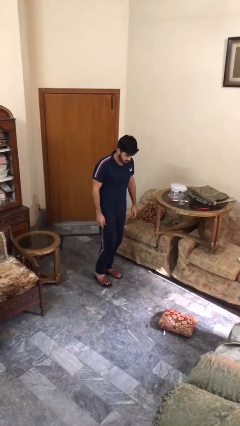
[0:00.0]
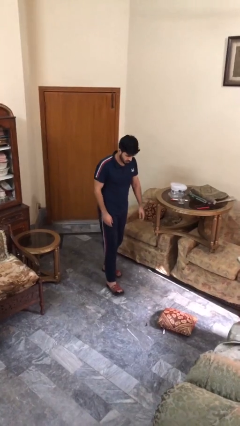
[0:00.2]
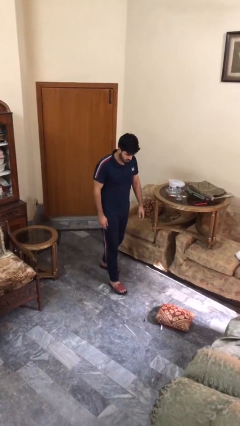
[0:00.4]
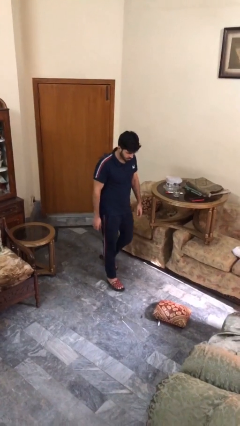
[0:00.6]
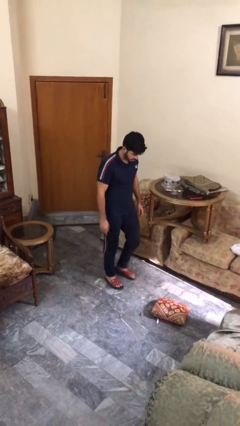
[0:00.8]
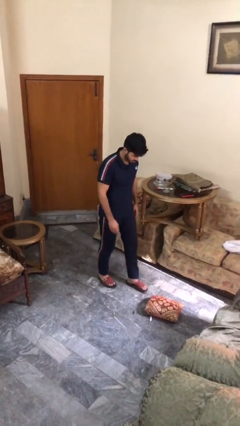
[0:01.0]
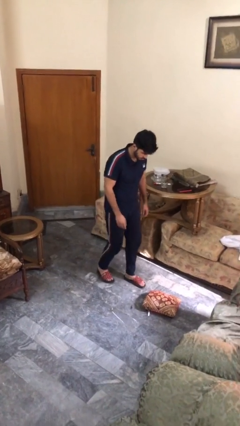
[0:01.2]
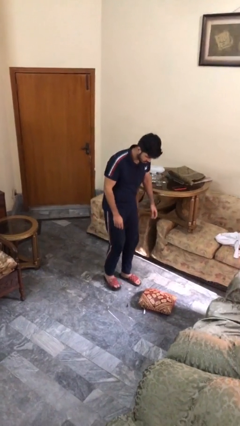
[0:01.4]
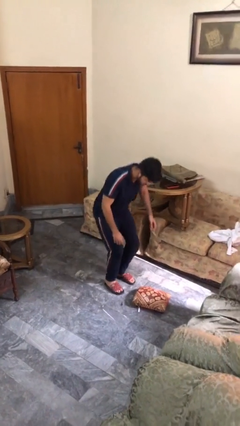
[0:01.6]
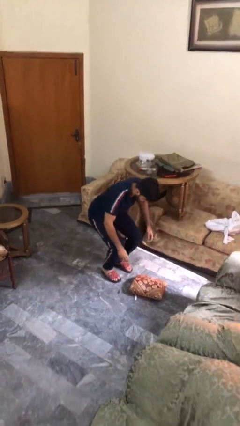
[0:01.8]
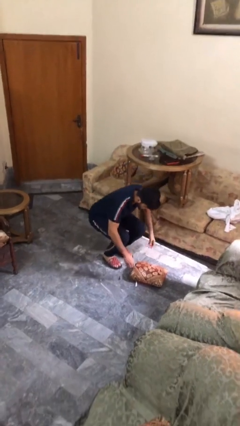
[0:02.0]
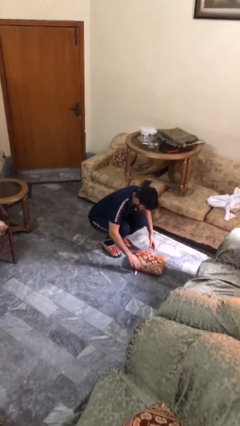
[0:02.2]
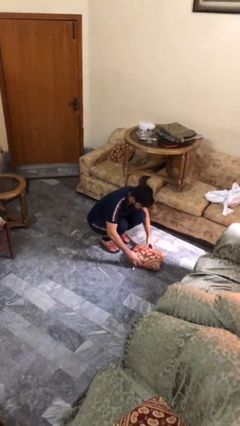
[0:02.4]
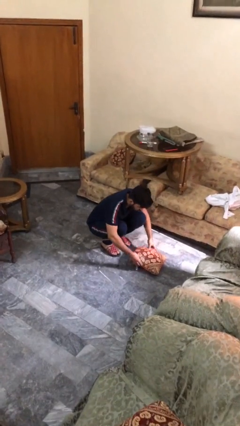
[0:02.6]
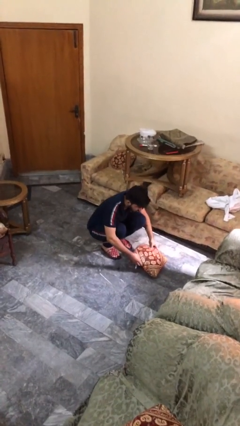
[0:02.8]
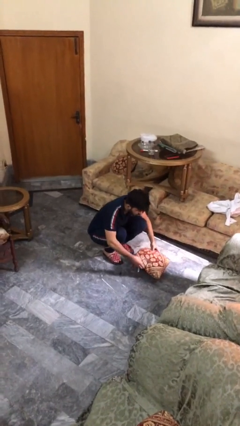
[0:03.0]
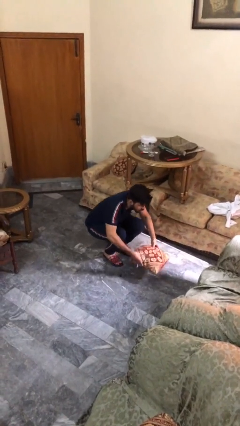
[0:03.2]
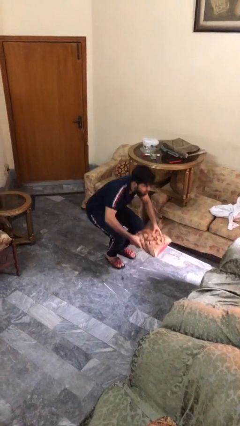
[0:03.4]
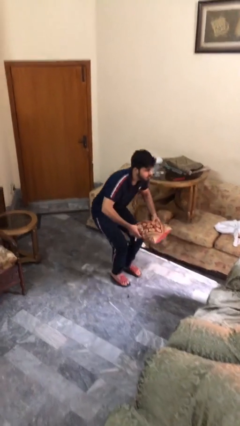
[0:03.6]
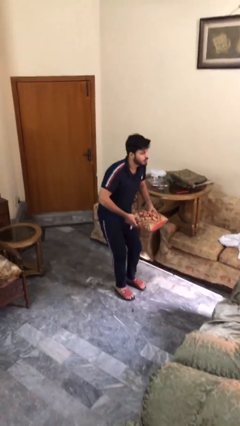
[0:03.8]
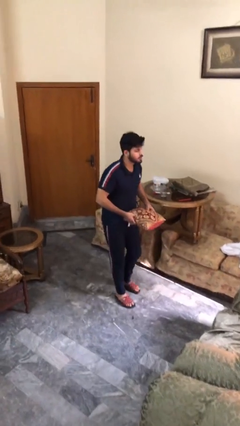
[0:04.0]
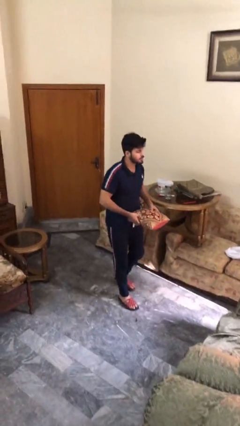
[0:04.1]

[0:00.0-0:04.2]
person picks up object from floor

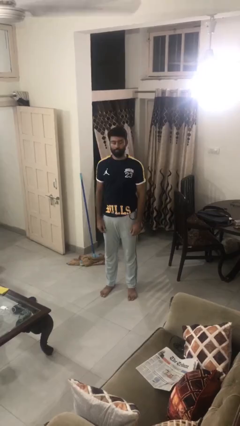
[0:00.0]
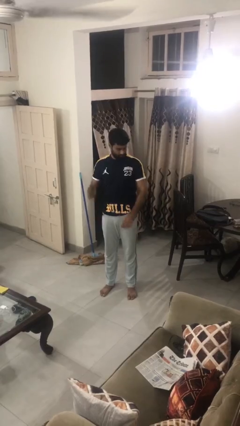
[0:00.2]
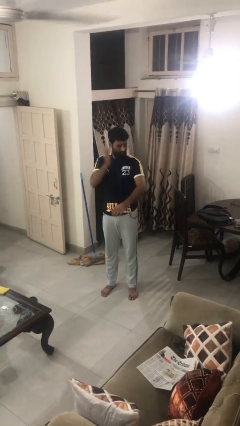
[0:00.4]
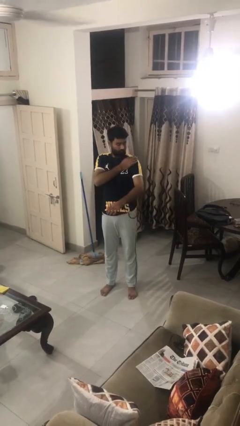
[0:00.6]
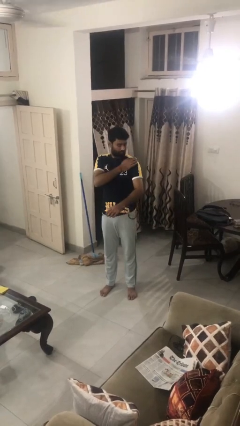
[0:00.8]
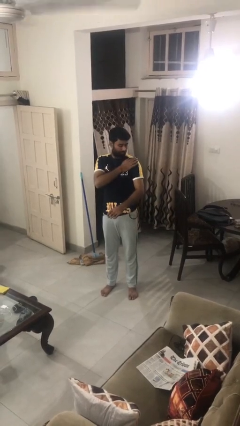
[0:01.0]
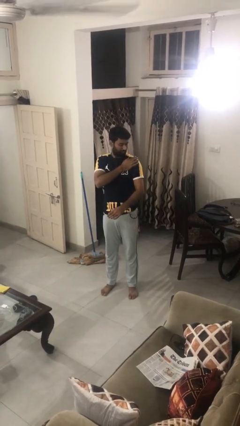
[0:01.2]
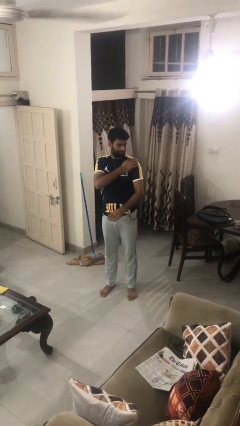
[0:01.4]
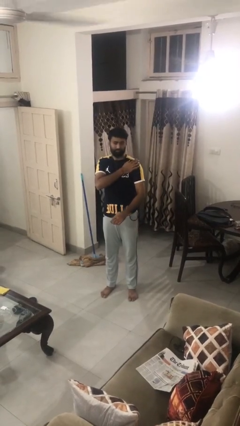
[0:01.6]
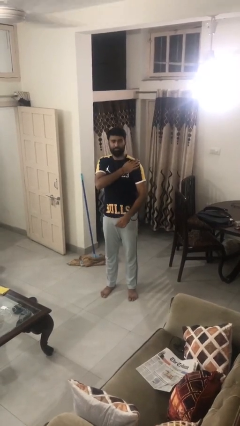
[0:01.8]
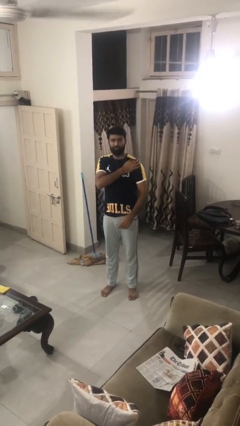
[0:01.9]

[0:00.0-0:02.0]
person swats bug

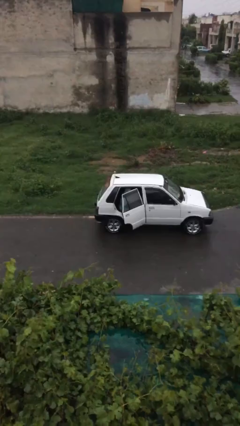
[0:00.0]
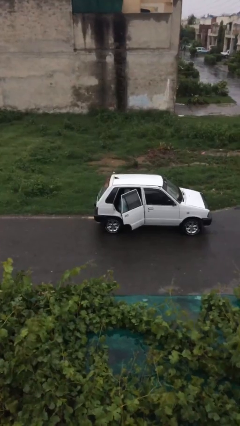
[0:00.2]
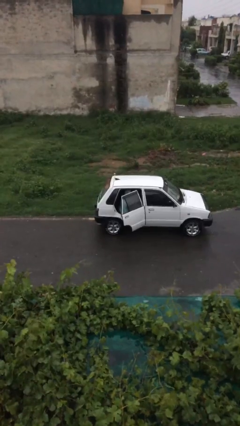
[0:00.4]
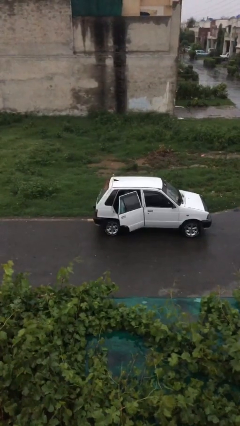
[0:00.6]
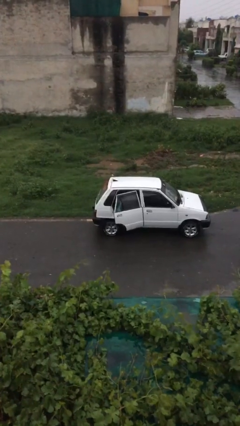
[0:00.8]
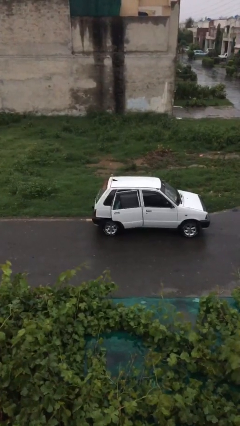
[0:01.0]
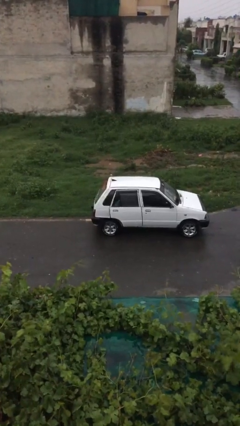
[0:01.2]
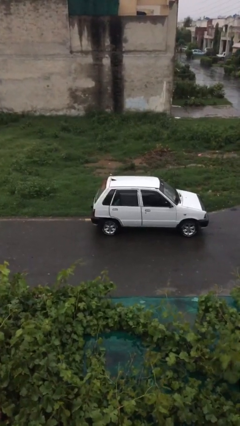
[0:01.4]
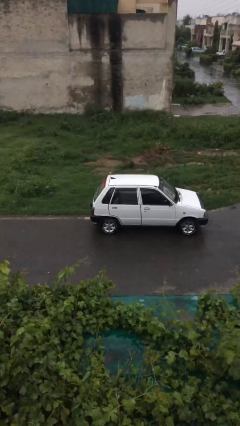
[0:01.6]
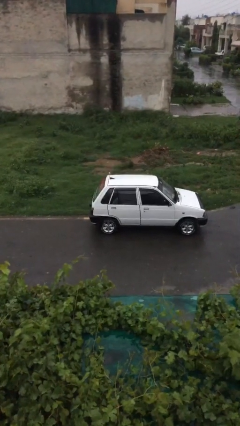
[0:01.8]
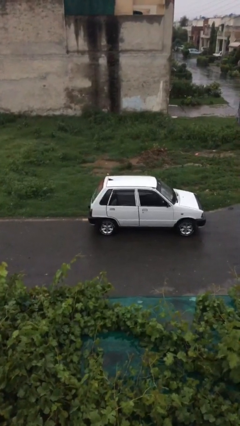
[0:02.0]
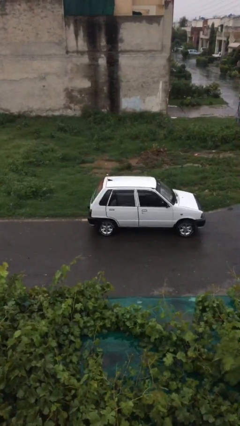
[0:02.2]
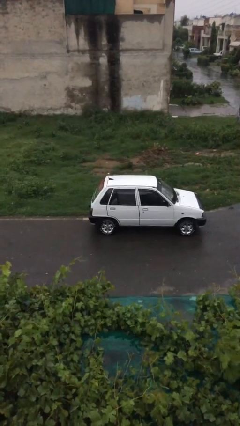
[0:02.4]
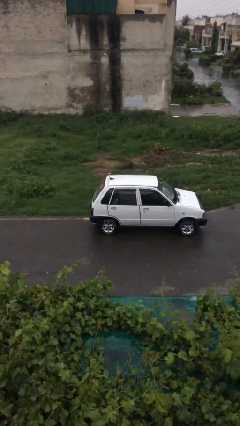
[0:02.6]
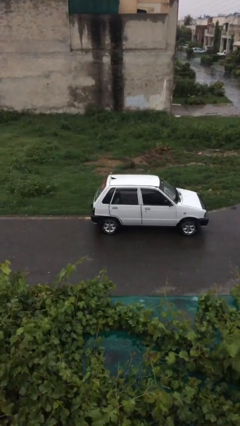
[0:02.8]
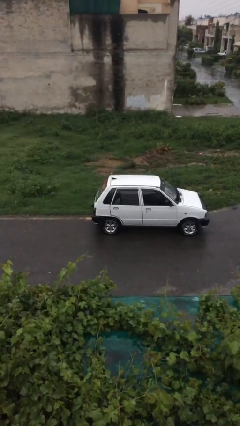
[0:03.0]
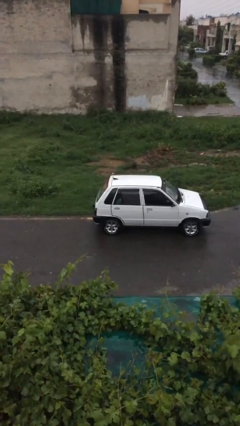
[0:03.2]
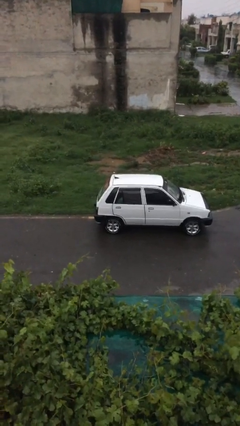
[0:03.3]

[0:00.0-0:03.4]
person closes car door

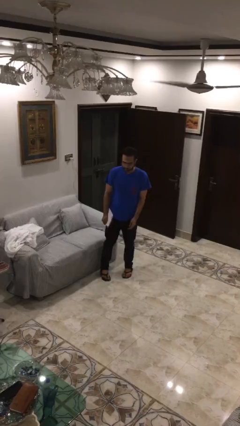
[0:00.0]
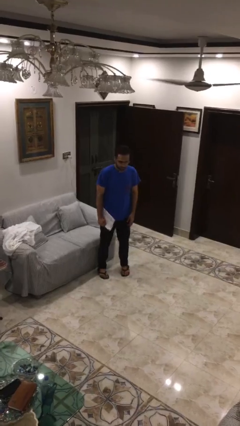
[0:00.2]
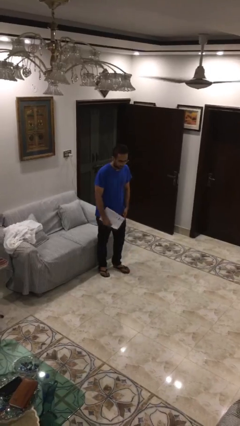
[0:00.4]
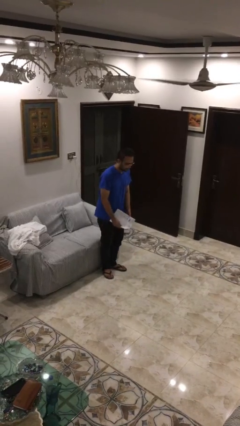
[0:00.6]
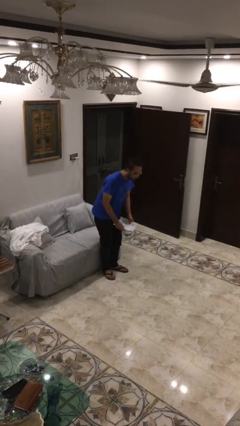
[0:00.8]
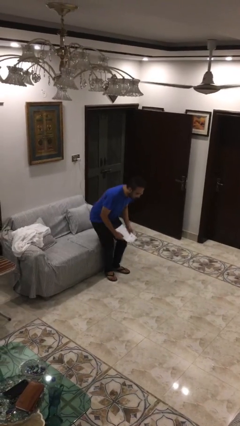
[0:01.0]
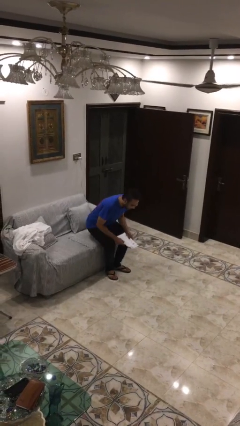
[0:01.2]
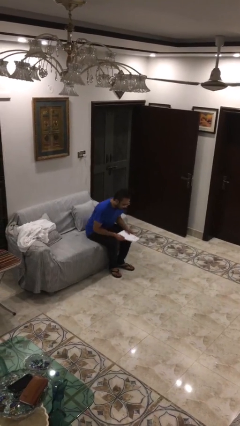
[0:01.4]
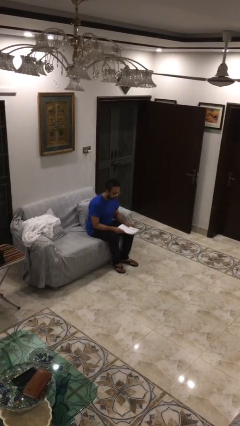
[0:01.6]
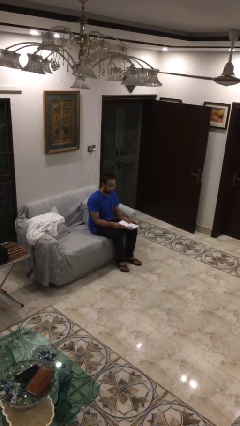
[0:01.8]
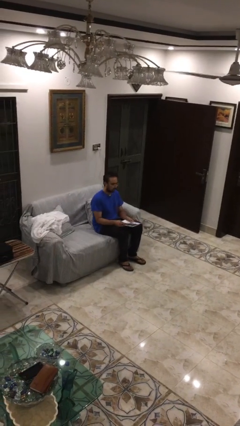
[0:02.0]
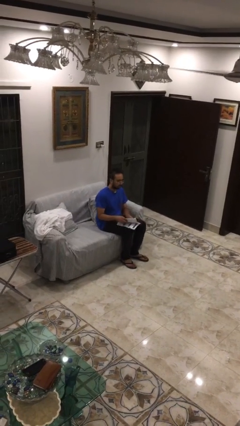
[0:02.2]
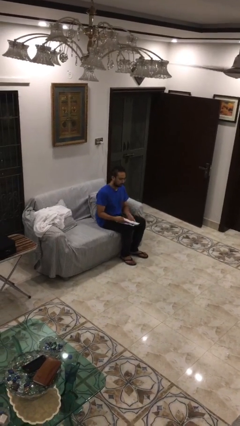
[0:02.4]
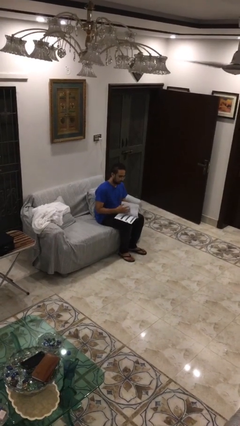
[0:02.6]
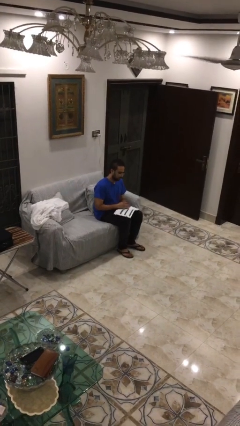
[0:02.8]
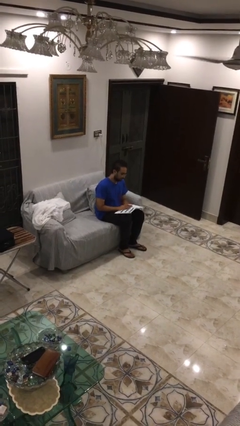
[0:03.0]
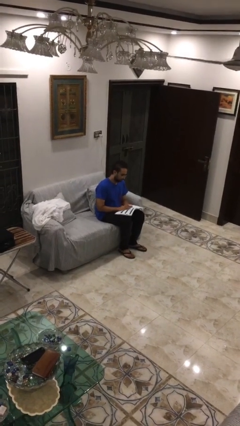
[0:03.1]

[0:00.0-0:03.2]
person sits down

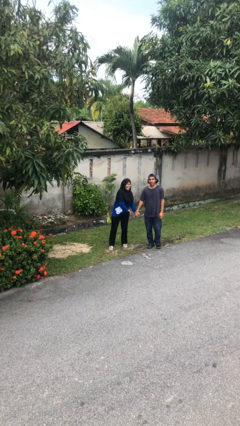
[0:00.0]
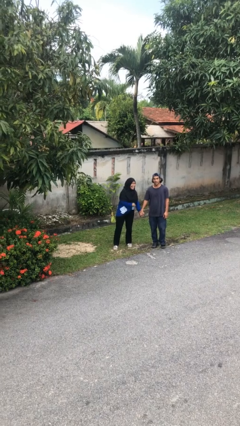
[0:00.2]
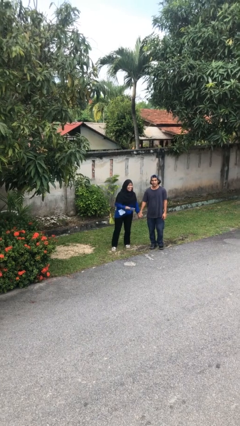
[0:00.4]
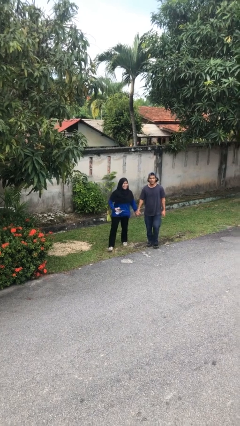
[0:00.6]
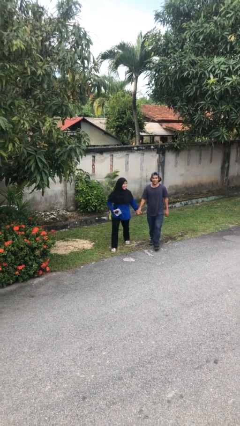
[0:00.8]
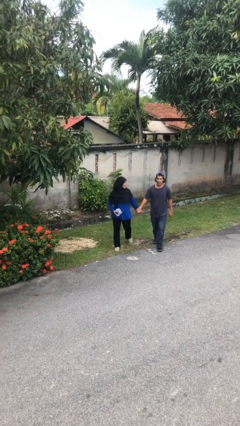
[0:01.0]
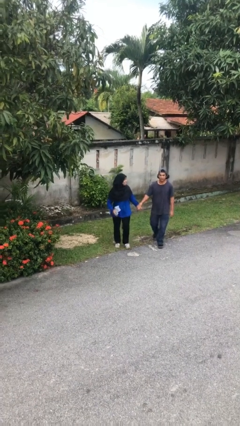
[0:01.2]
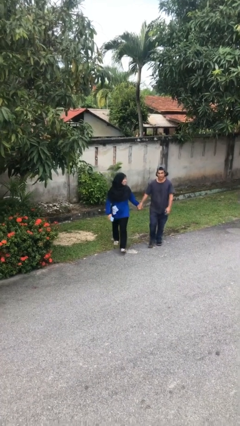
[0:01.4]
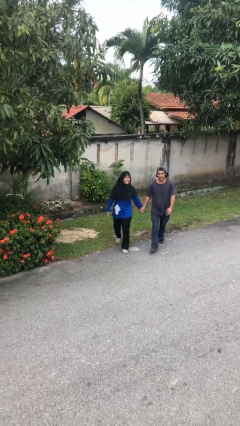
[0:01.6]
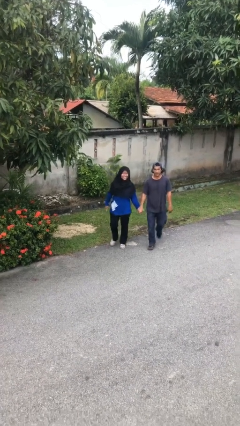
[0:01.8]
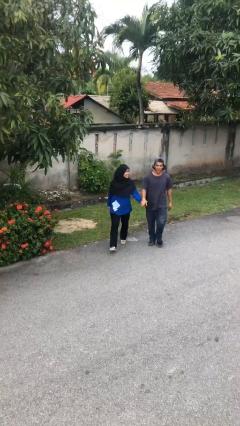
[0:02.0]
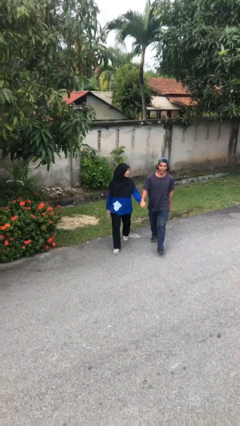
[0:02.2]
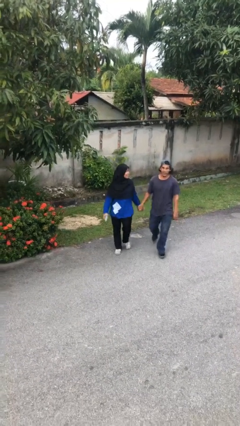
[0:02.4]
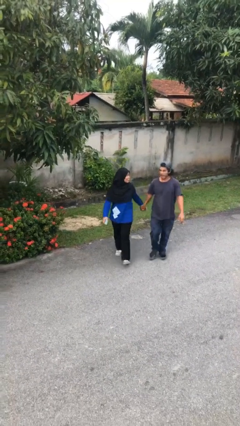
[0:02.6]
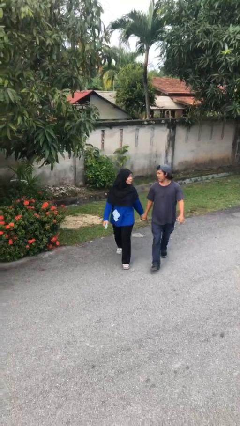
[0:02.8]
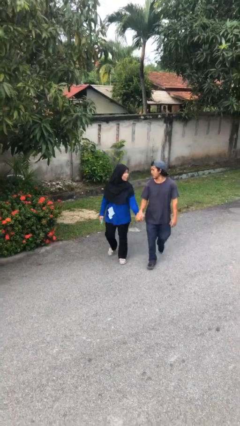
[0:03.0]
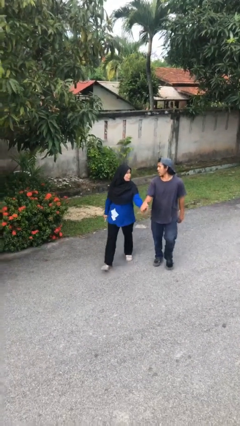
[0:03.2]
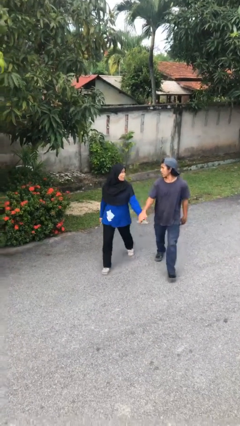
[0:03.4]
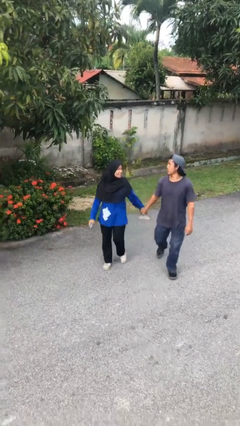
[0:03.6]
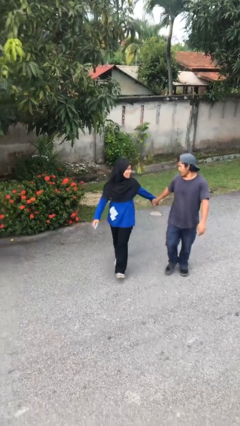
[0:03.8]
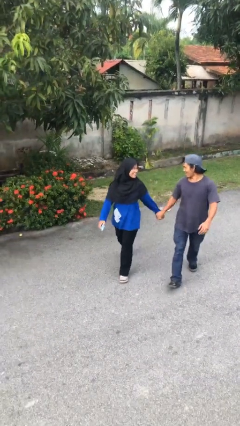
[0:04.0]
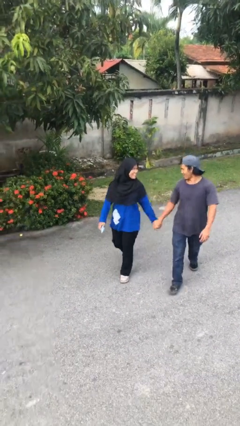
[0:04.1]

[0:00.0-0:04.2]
person holds hand

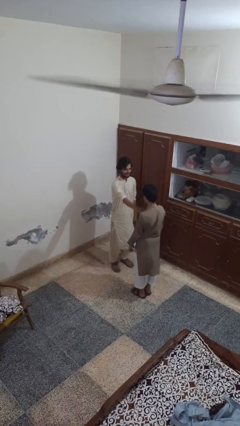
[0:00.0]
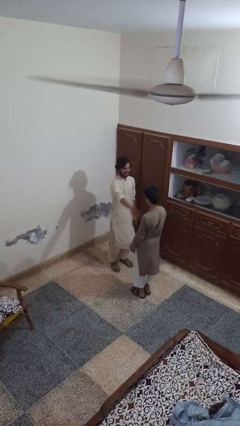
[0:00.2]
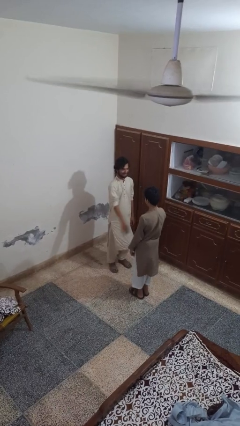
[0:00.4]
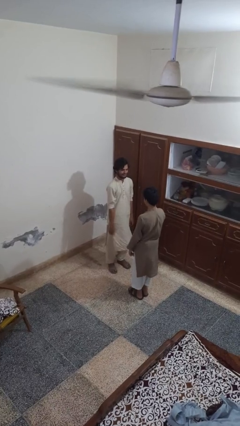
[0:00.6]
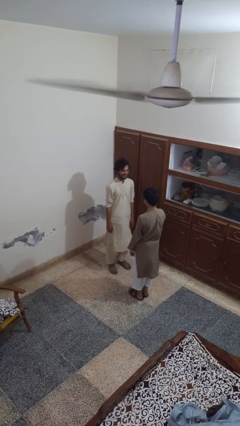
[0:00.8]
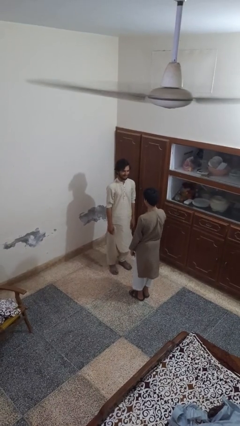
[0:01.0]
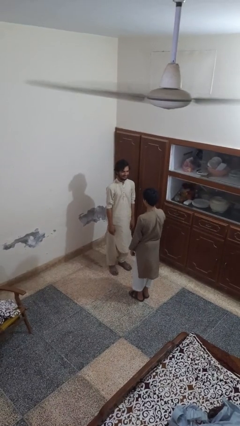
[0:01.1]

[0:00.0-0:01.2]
person shoves person
